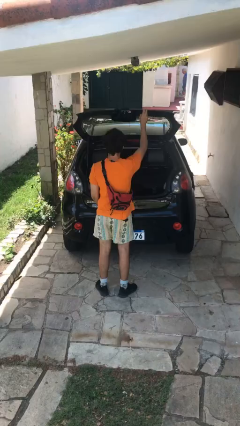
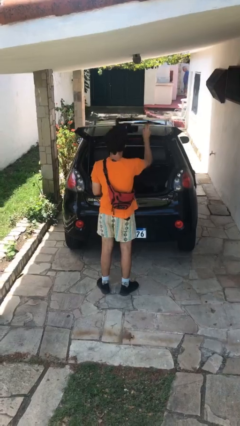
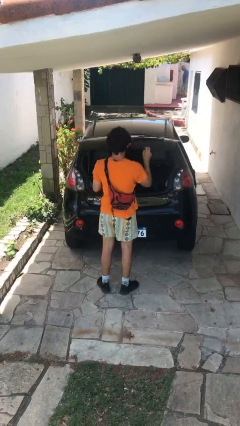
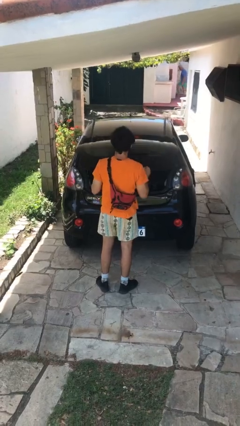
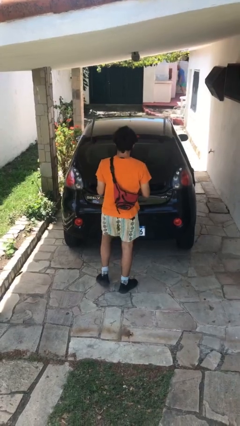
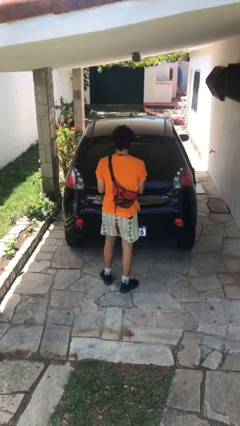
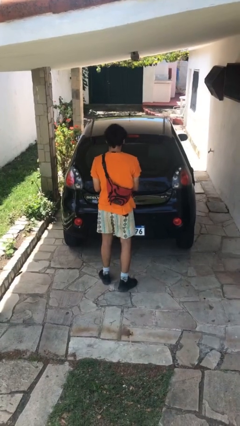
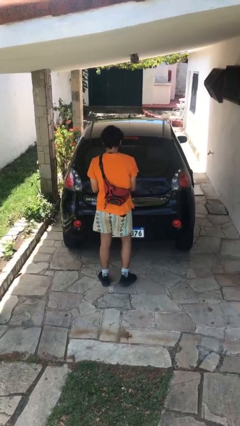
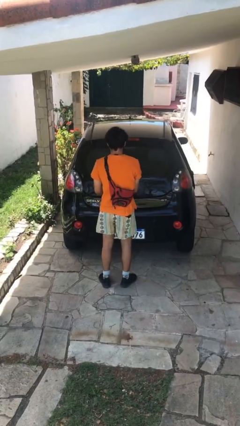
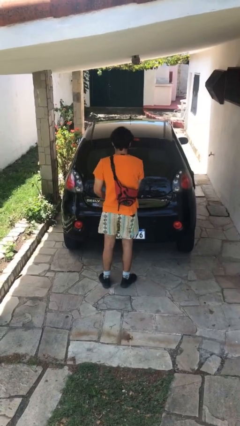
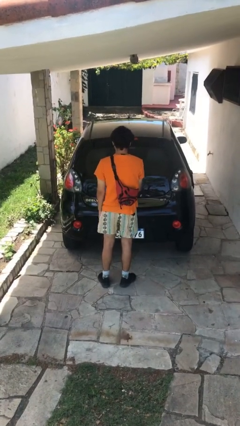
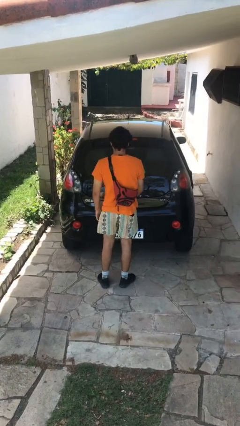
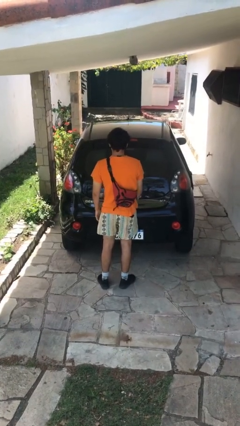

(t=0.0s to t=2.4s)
person closes car trunk

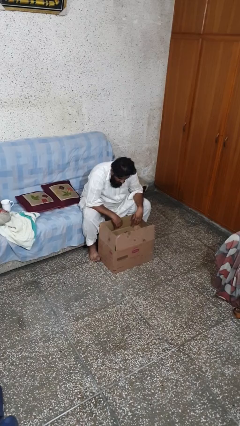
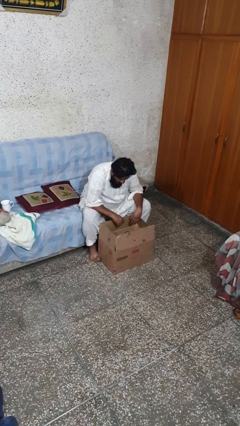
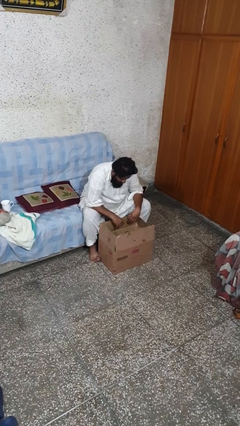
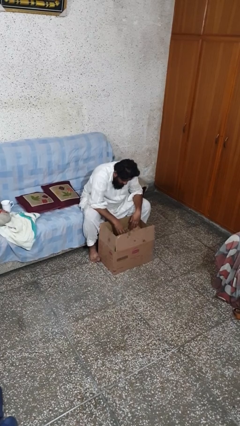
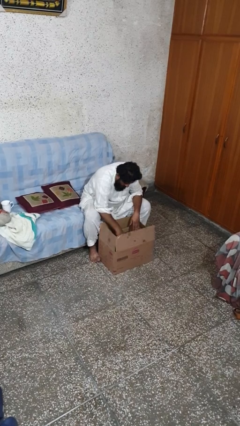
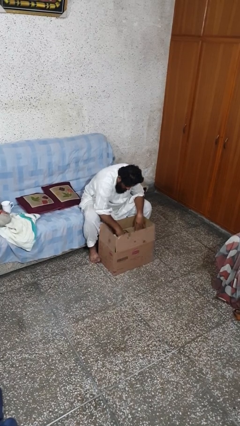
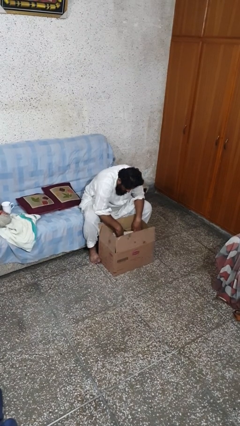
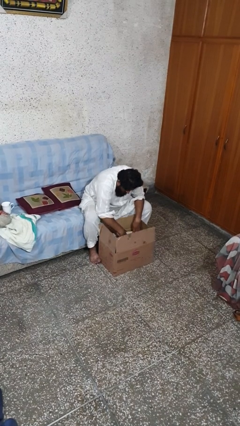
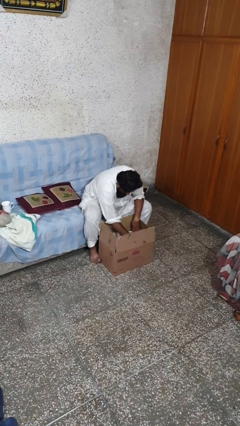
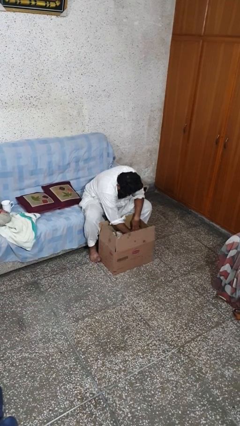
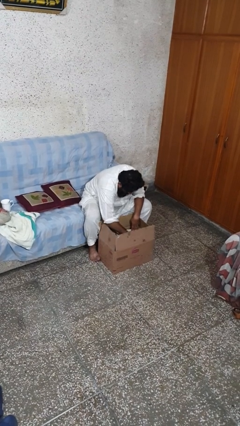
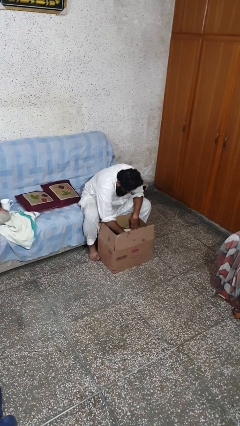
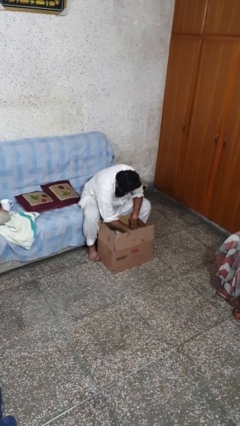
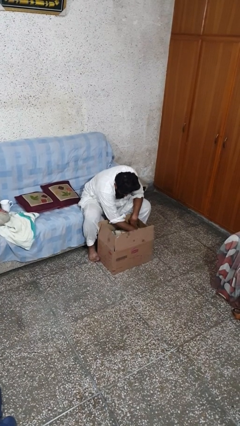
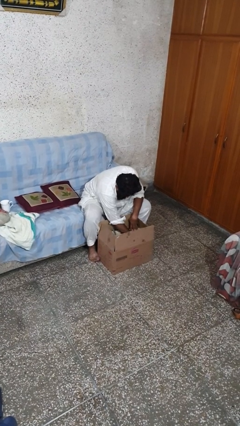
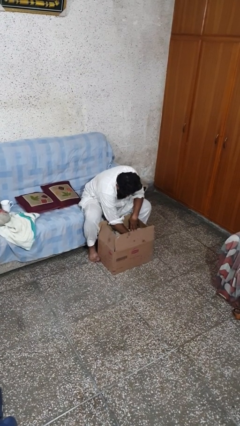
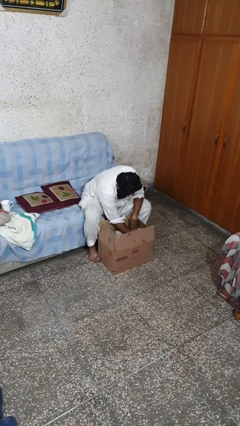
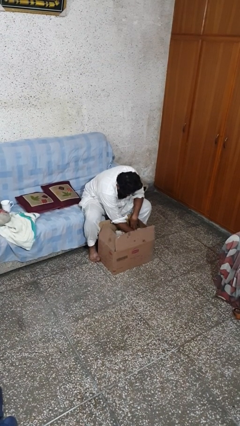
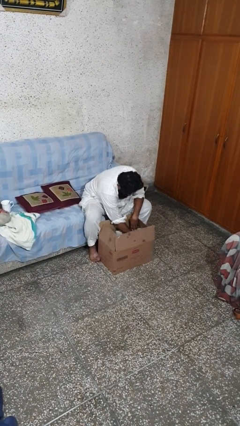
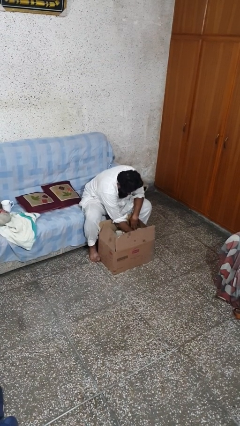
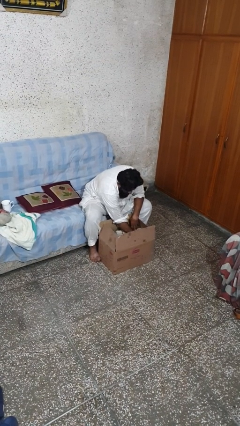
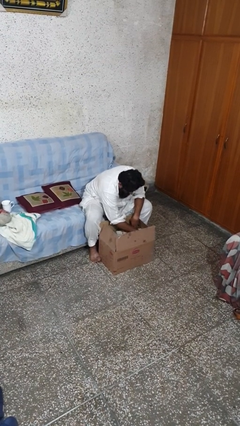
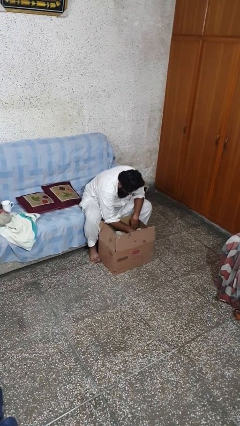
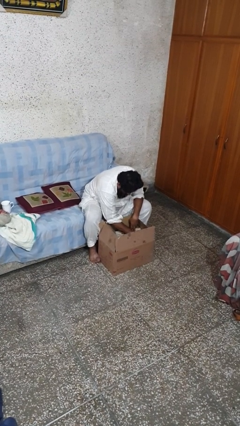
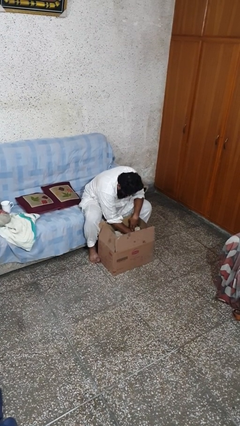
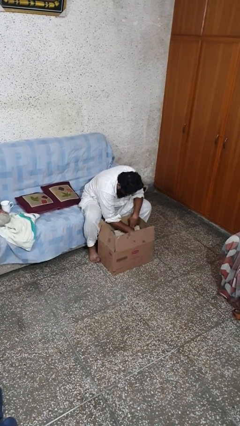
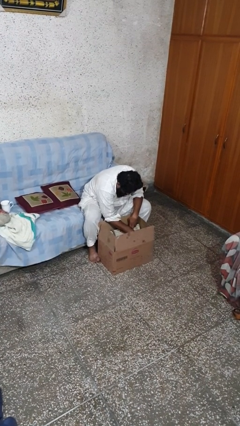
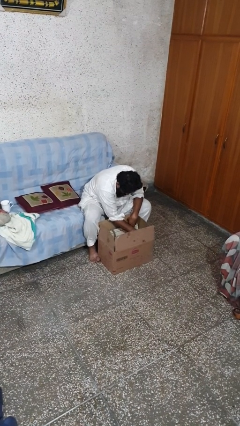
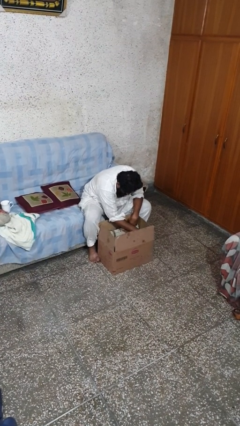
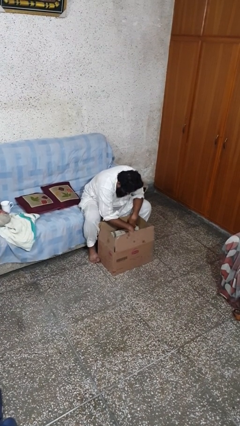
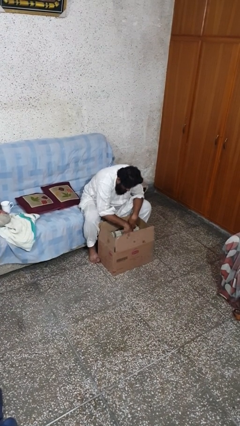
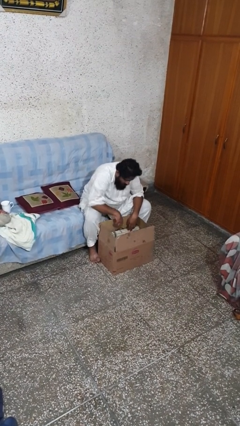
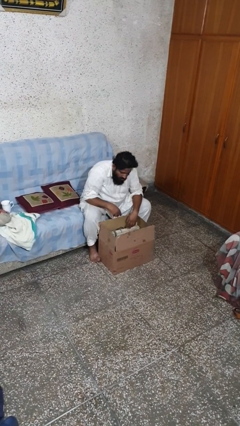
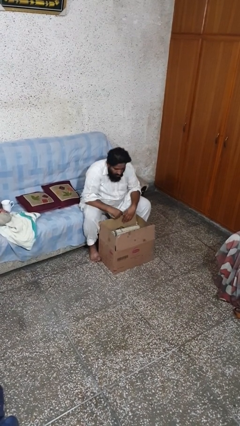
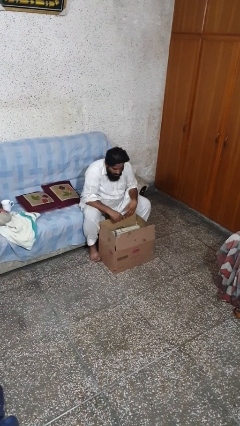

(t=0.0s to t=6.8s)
person searches in box

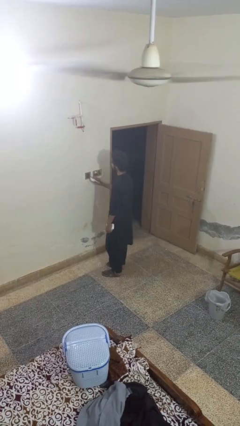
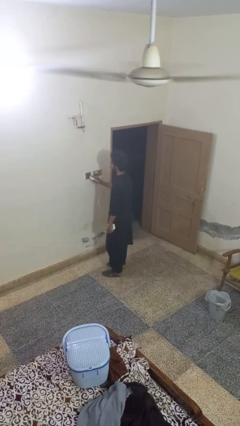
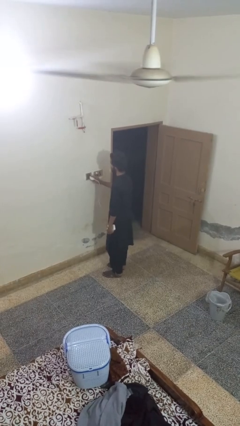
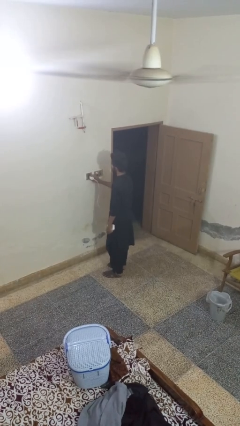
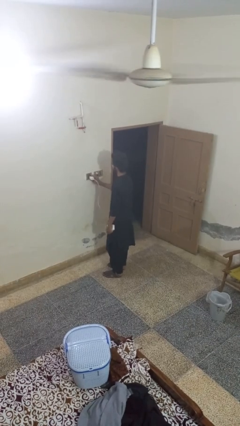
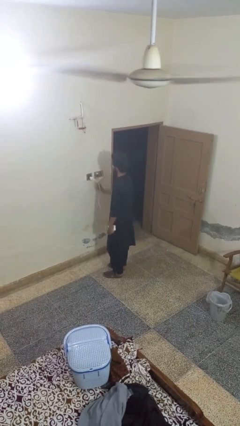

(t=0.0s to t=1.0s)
person plugs into electrical socket

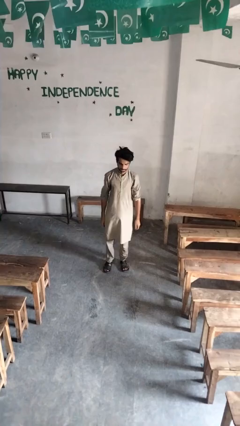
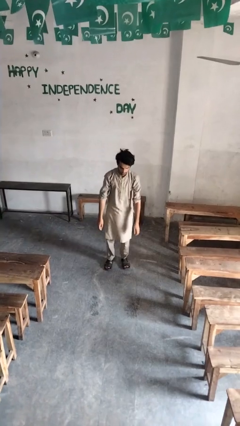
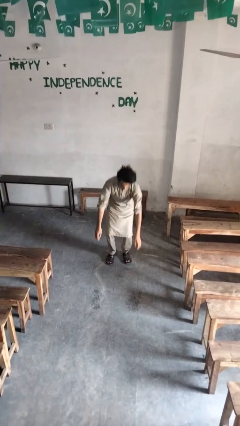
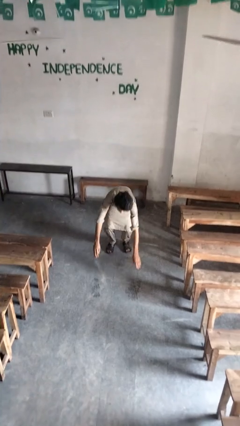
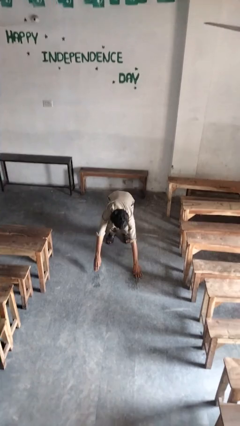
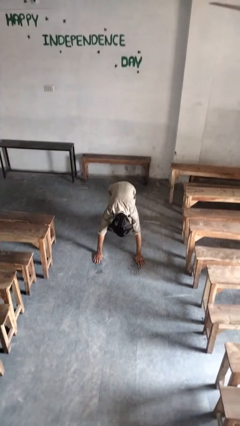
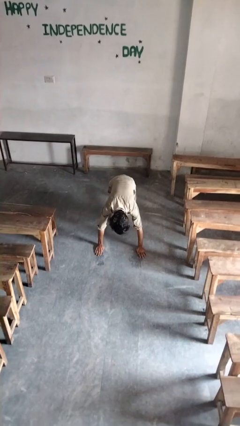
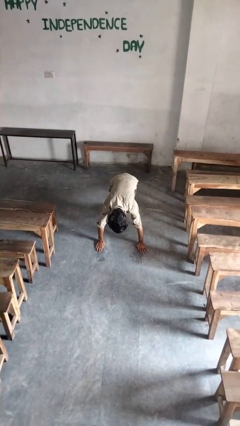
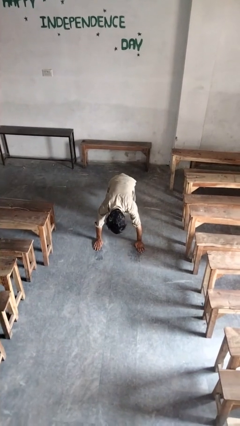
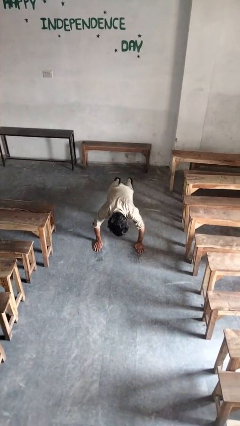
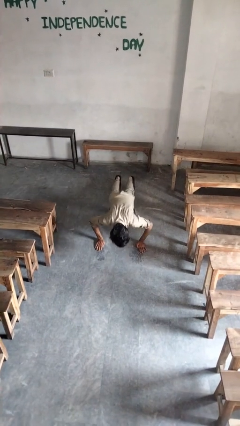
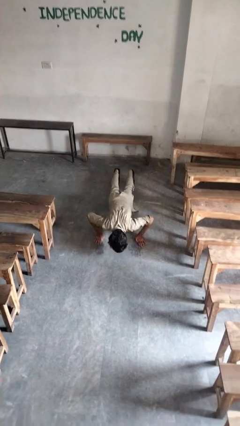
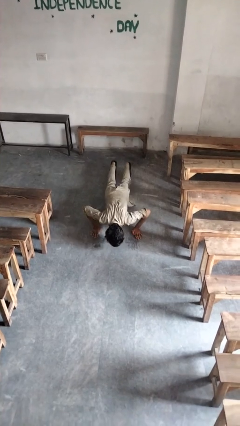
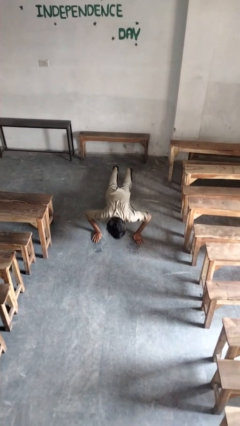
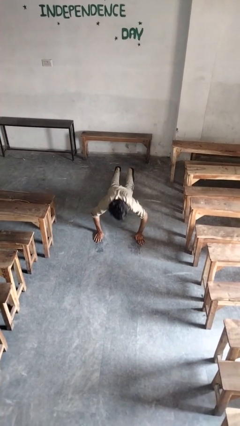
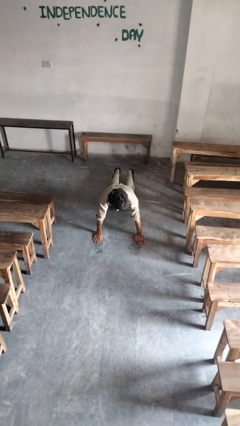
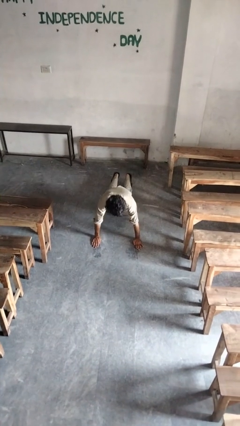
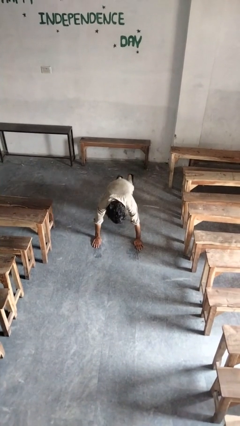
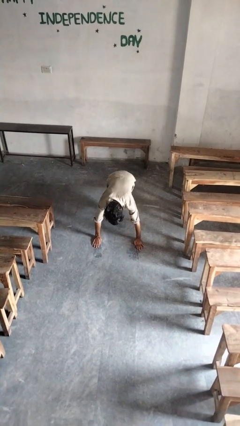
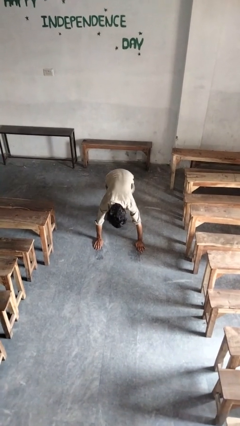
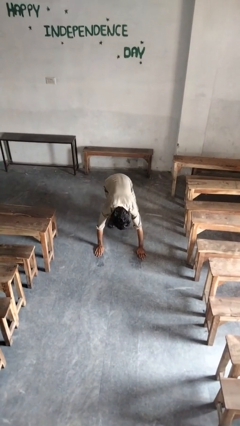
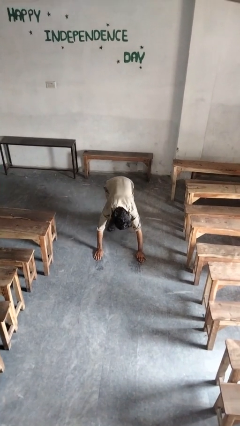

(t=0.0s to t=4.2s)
person exercises with pushup

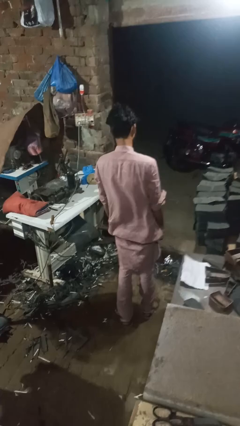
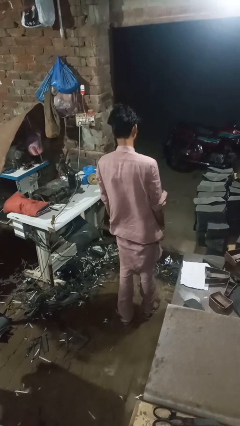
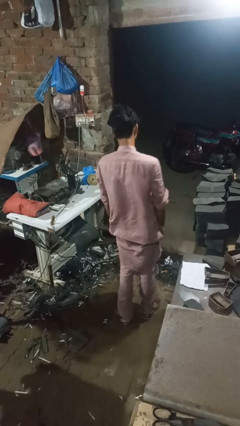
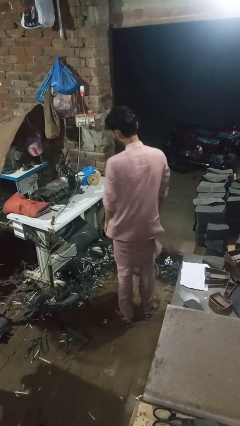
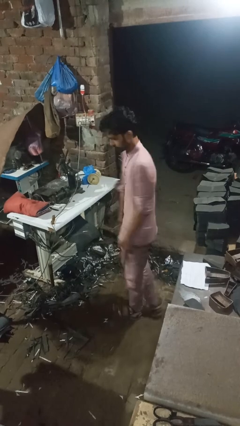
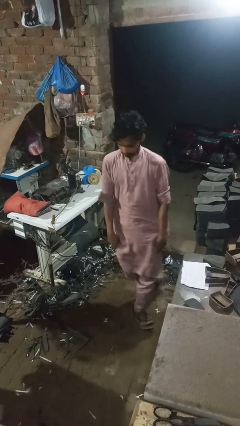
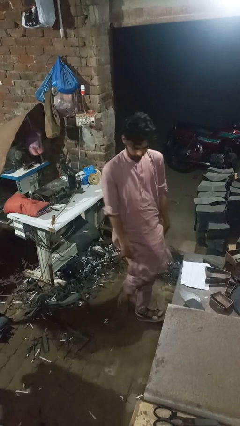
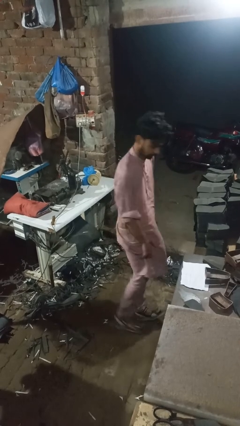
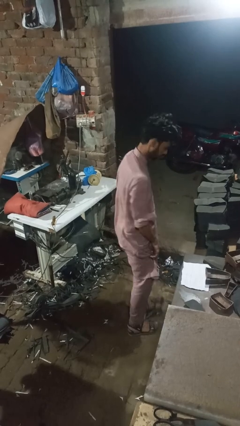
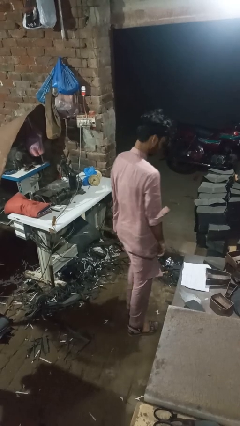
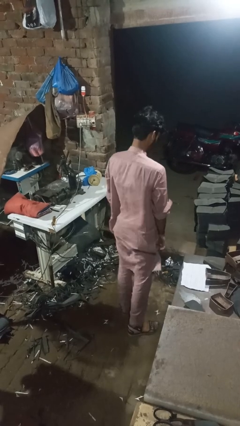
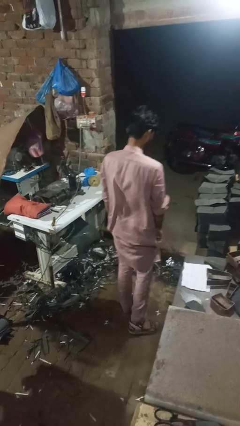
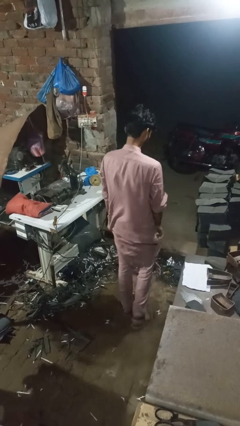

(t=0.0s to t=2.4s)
person twirls

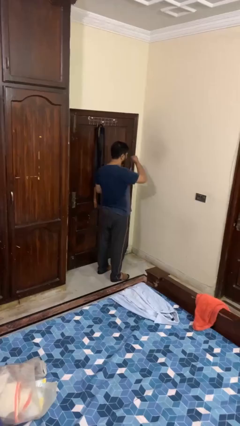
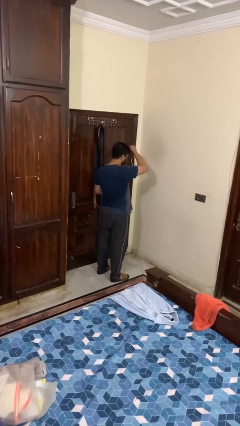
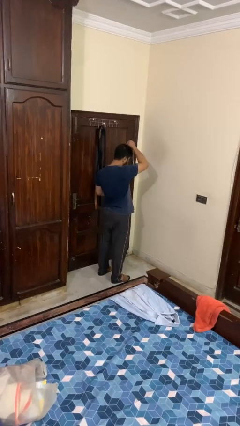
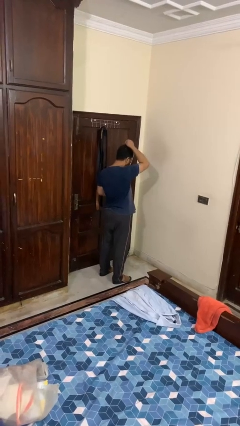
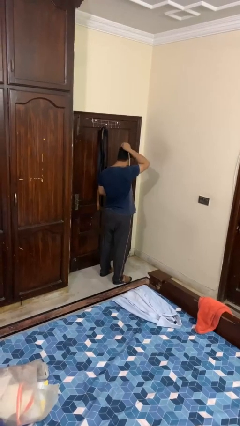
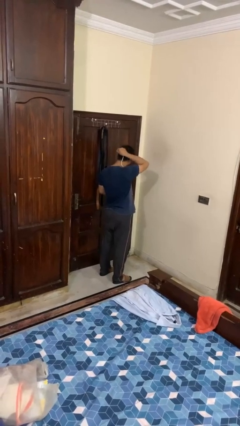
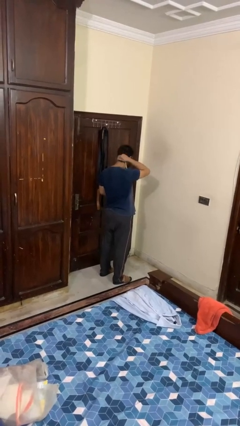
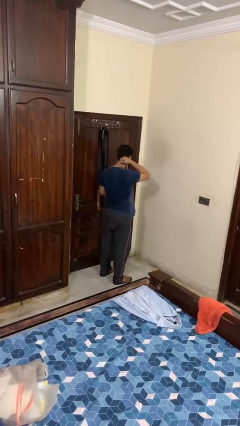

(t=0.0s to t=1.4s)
person puts on necklace
